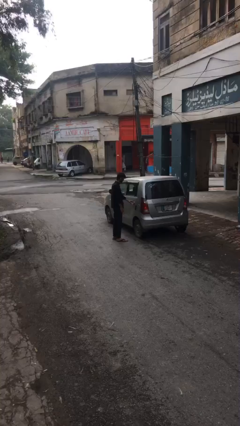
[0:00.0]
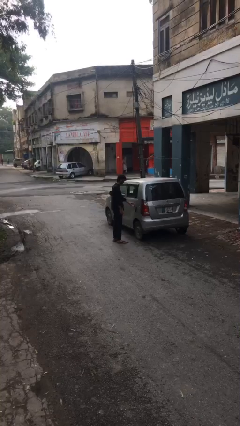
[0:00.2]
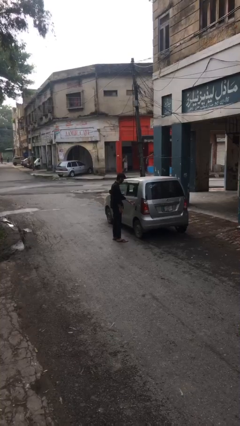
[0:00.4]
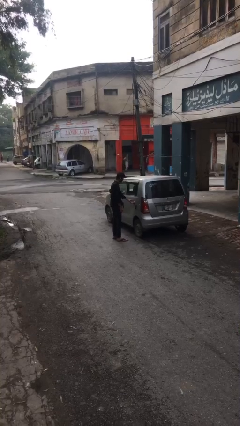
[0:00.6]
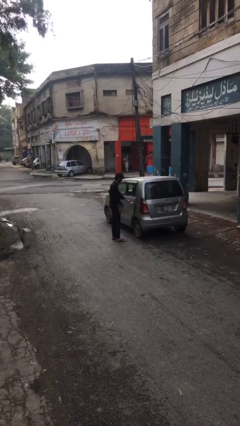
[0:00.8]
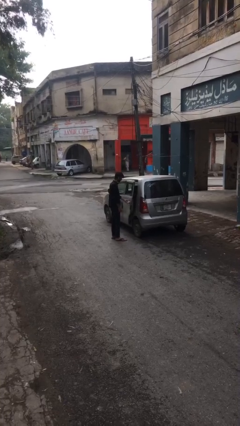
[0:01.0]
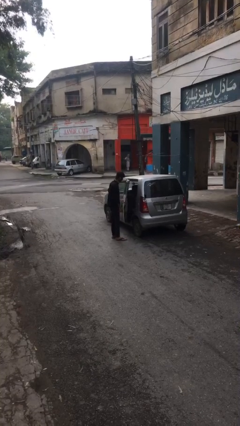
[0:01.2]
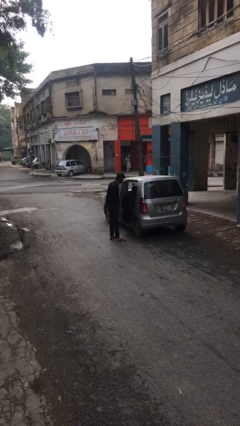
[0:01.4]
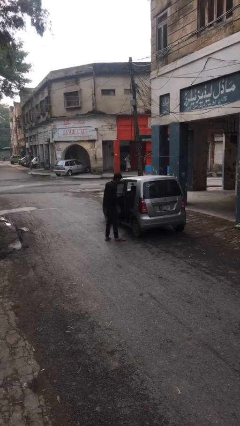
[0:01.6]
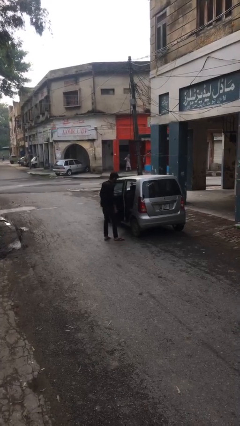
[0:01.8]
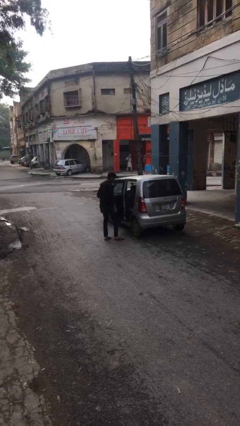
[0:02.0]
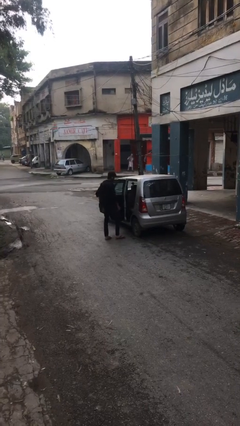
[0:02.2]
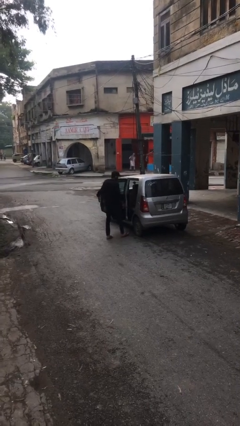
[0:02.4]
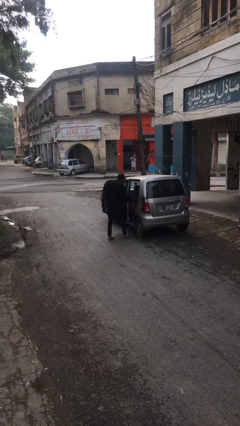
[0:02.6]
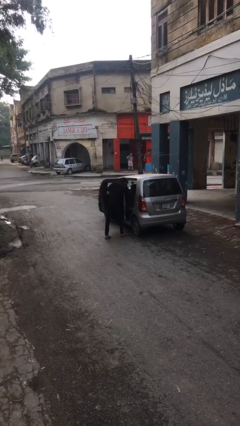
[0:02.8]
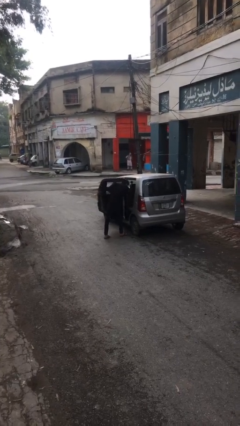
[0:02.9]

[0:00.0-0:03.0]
person opens car door

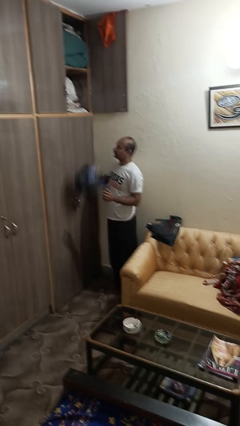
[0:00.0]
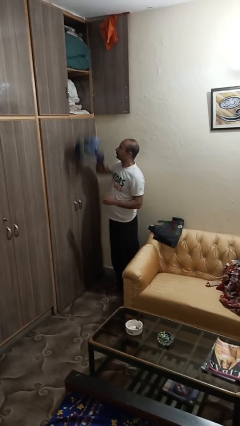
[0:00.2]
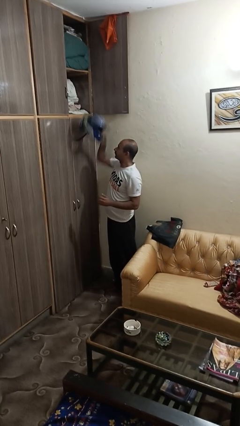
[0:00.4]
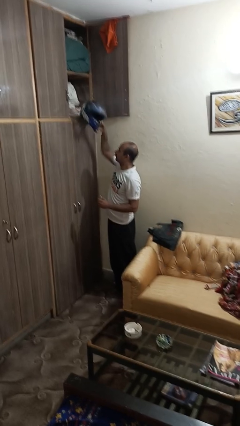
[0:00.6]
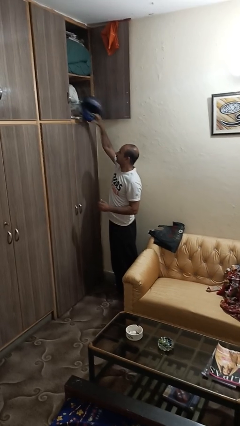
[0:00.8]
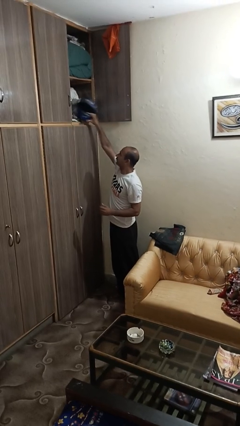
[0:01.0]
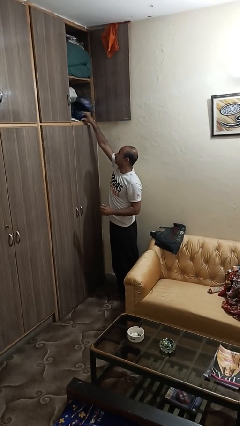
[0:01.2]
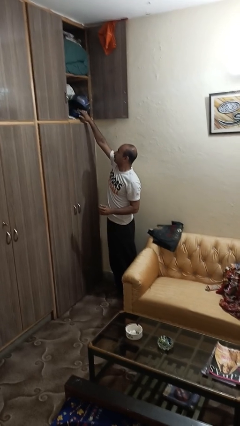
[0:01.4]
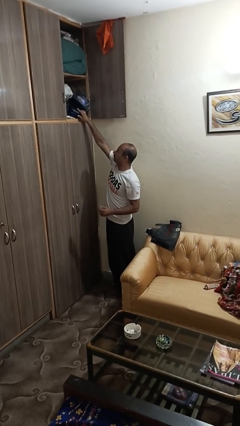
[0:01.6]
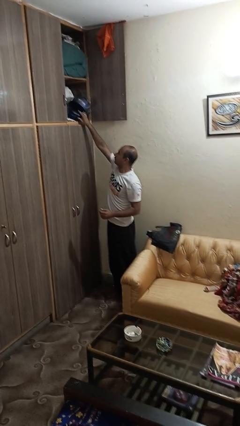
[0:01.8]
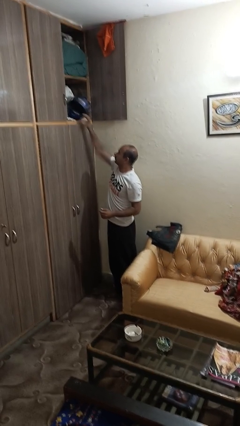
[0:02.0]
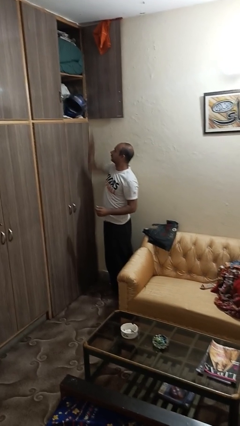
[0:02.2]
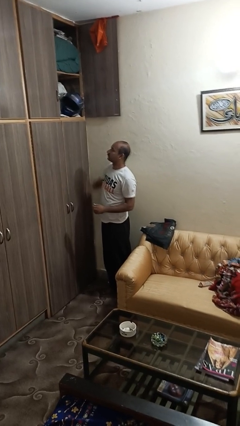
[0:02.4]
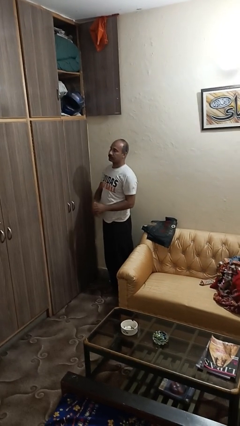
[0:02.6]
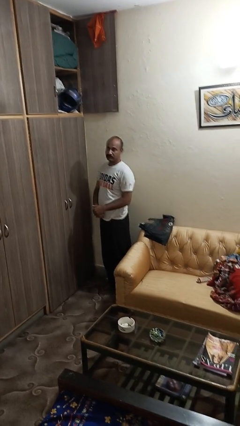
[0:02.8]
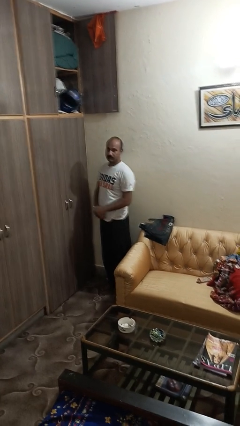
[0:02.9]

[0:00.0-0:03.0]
person puts down object on shelf

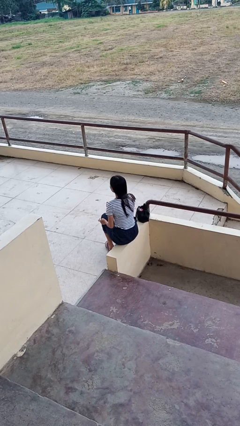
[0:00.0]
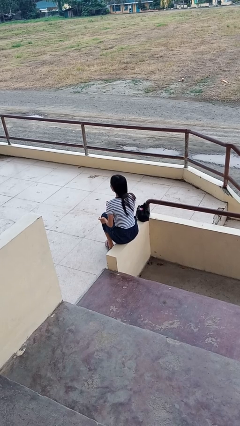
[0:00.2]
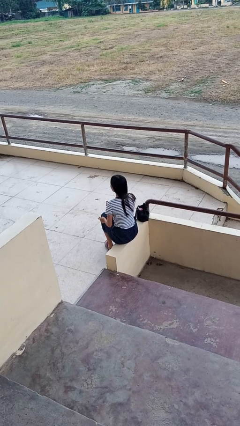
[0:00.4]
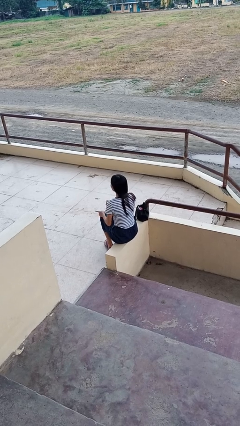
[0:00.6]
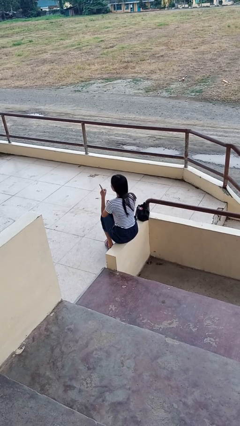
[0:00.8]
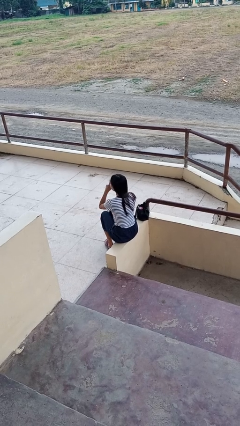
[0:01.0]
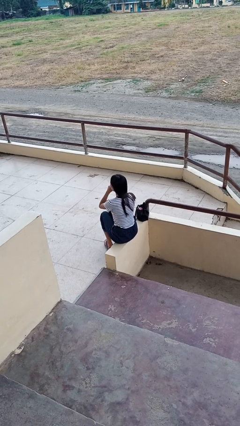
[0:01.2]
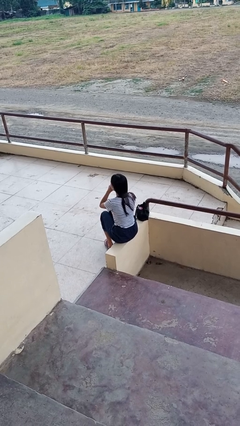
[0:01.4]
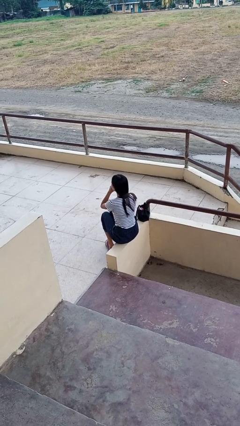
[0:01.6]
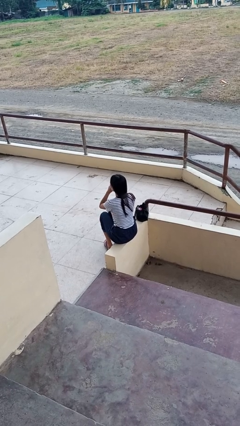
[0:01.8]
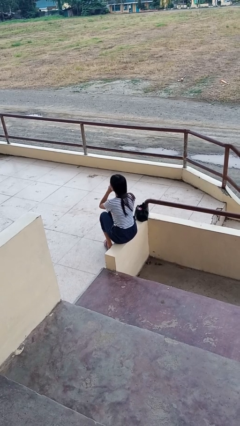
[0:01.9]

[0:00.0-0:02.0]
person gestures be quiet

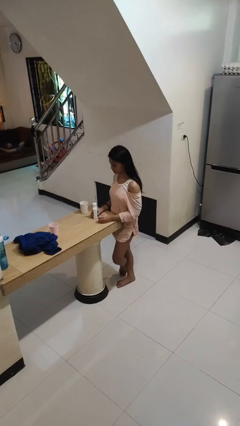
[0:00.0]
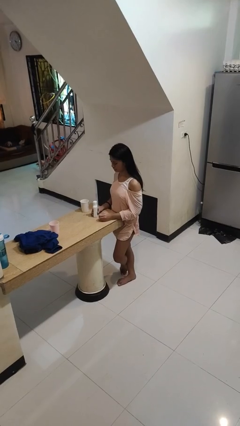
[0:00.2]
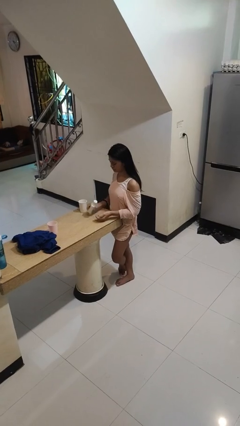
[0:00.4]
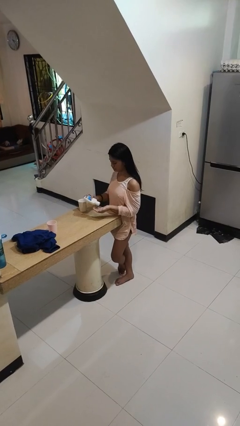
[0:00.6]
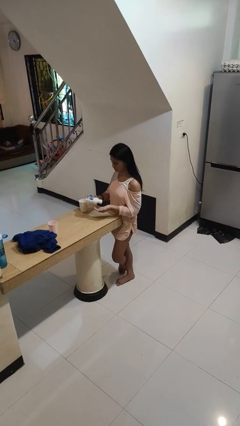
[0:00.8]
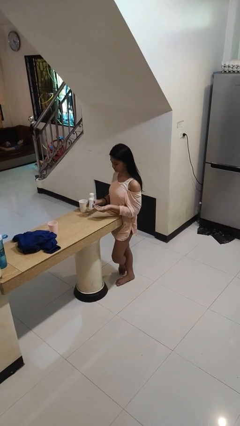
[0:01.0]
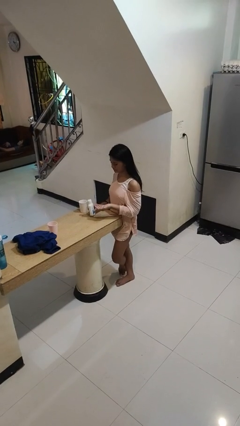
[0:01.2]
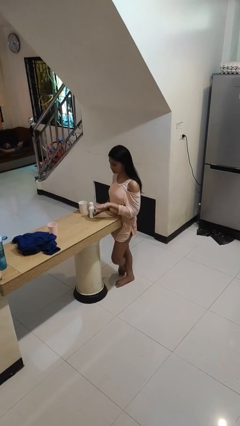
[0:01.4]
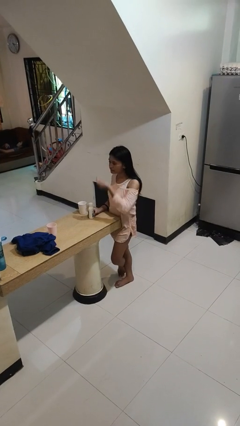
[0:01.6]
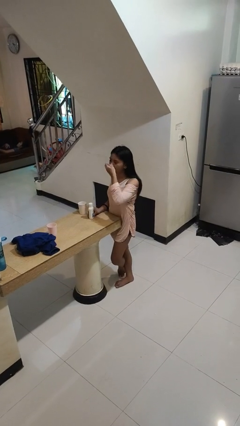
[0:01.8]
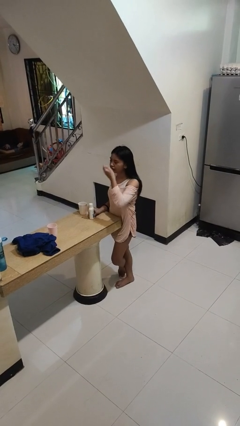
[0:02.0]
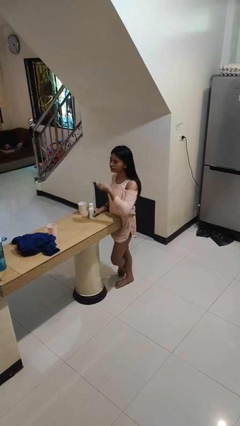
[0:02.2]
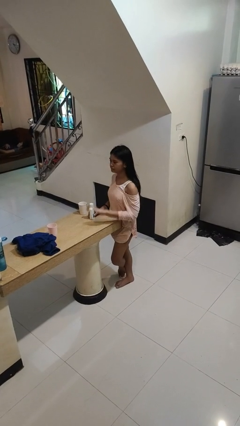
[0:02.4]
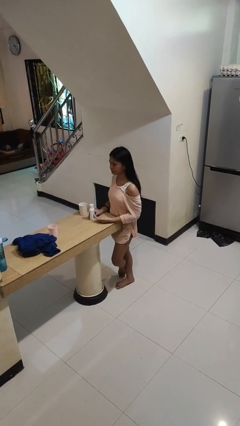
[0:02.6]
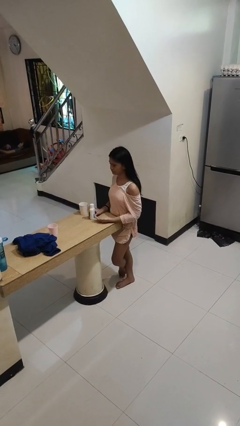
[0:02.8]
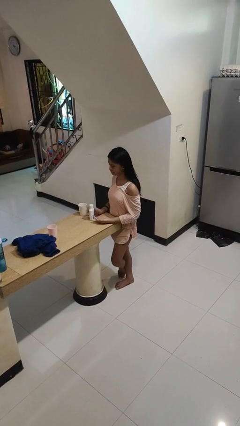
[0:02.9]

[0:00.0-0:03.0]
person takes medicine pills

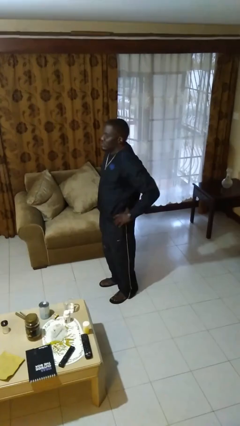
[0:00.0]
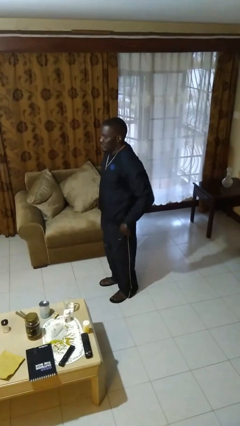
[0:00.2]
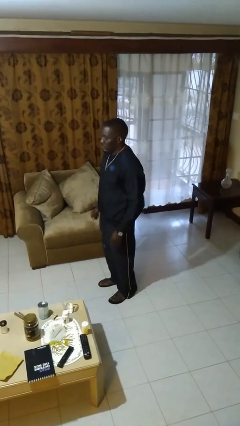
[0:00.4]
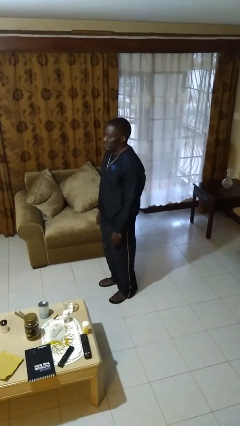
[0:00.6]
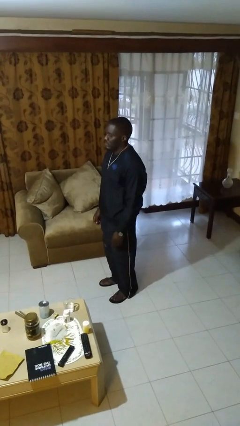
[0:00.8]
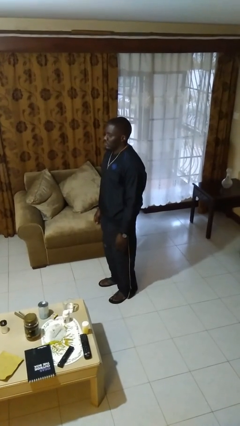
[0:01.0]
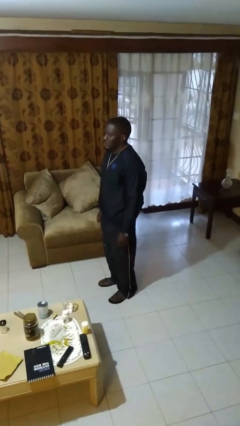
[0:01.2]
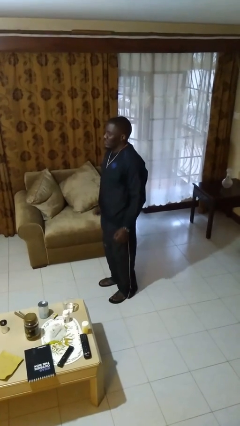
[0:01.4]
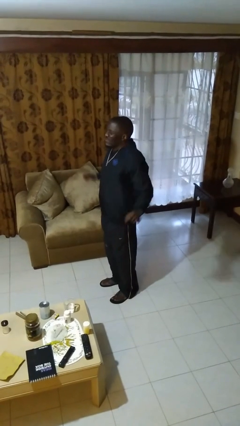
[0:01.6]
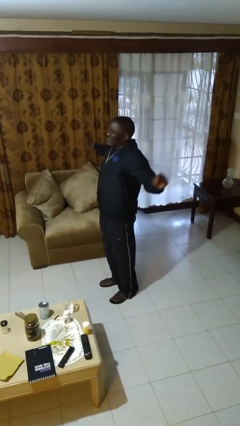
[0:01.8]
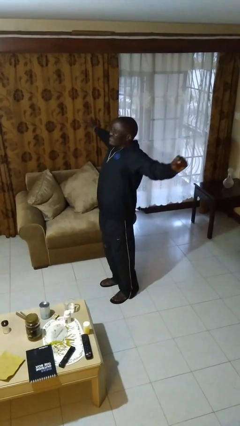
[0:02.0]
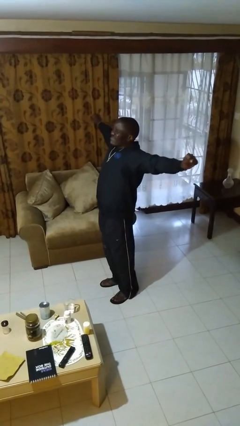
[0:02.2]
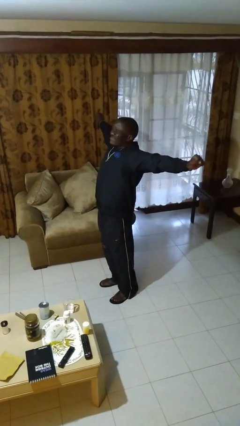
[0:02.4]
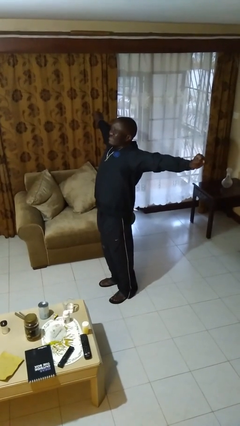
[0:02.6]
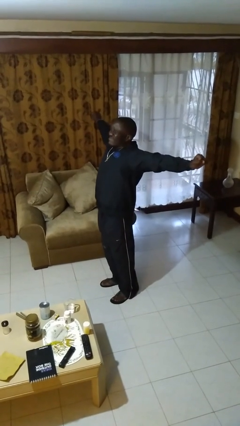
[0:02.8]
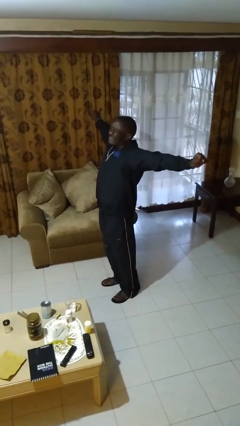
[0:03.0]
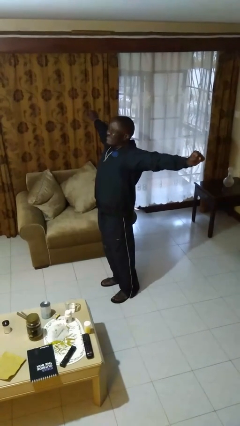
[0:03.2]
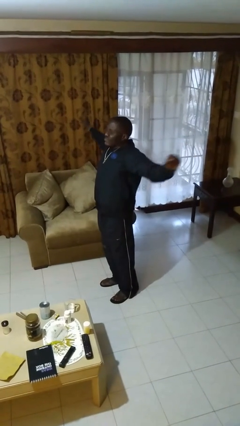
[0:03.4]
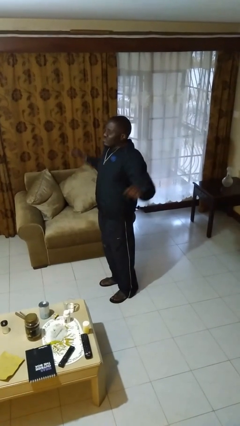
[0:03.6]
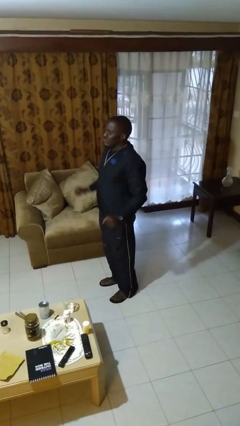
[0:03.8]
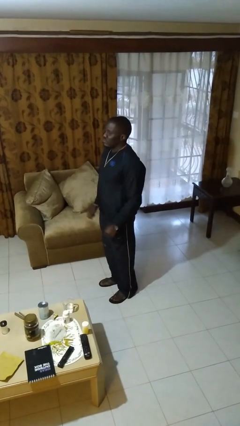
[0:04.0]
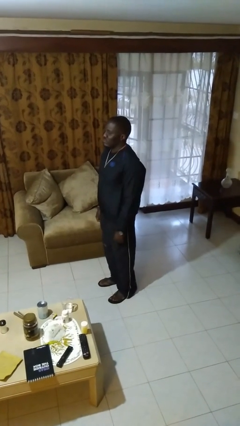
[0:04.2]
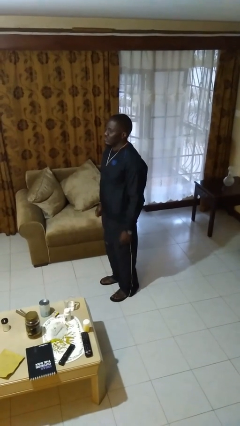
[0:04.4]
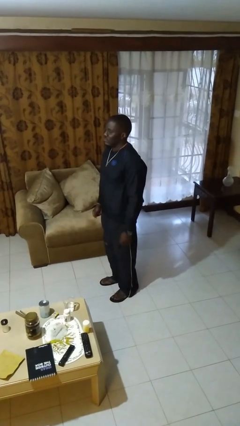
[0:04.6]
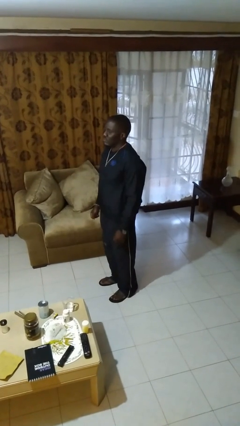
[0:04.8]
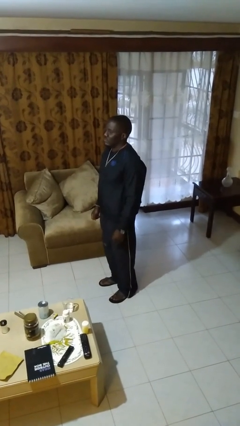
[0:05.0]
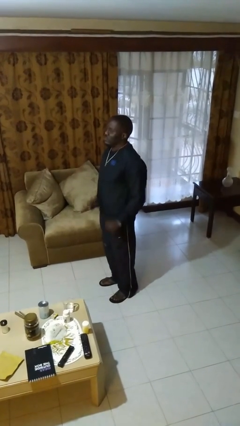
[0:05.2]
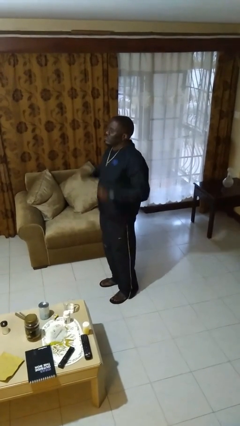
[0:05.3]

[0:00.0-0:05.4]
person stretches arms to side

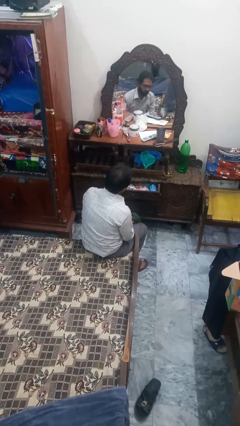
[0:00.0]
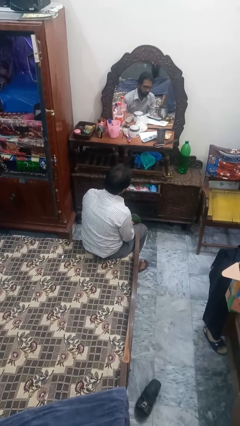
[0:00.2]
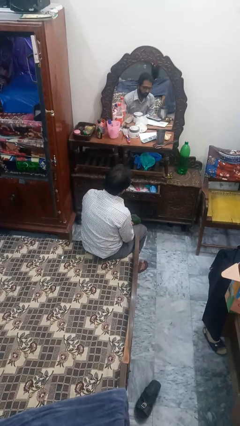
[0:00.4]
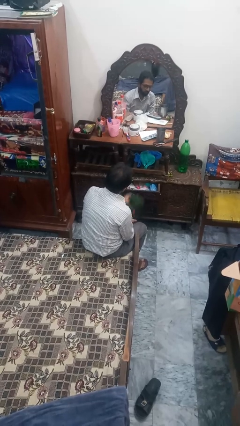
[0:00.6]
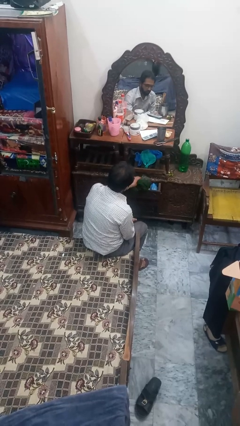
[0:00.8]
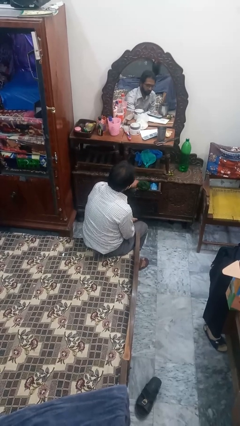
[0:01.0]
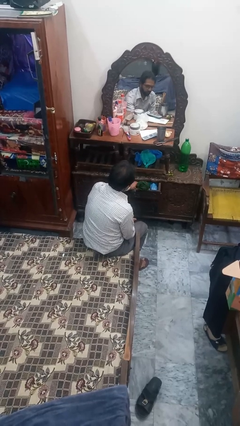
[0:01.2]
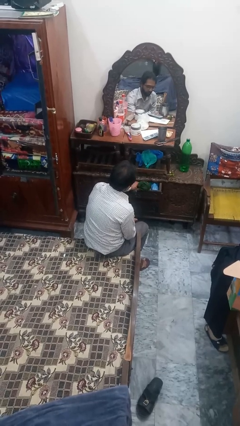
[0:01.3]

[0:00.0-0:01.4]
person puts clothes into dresser
